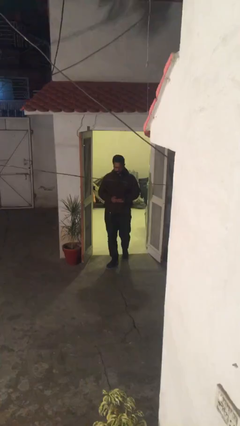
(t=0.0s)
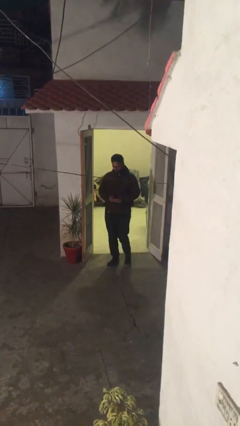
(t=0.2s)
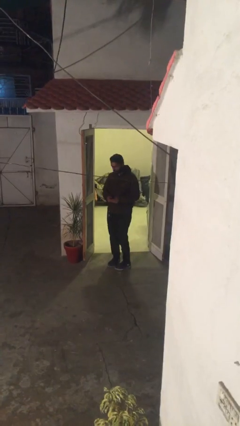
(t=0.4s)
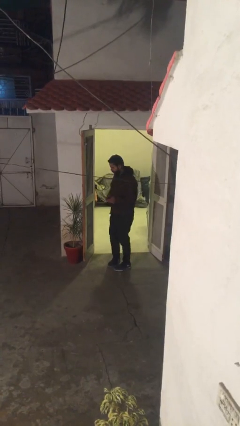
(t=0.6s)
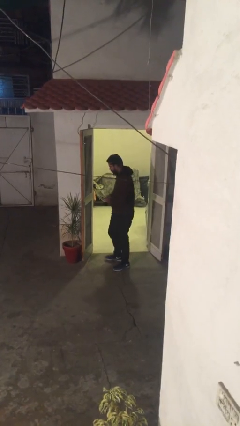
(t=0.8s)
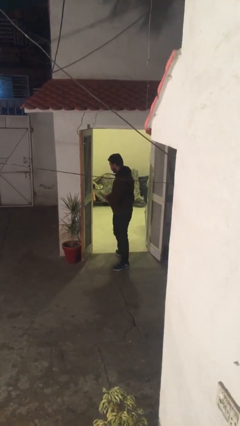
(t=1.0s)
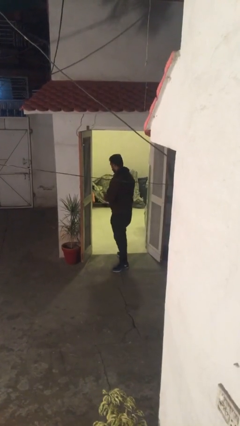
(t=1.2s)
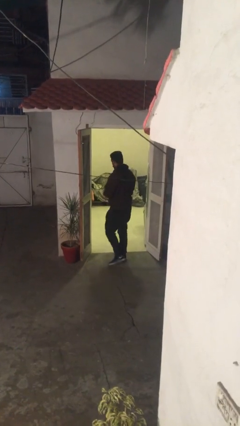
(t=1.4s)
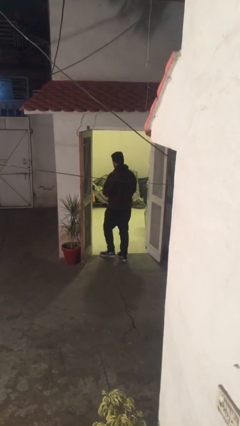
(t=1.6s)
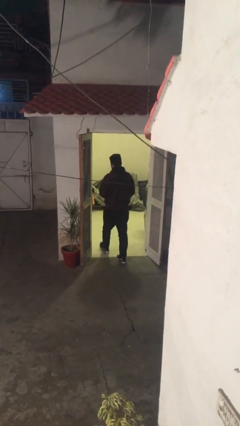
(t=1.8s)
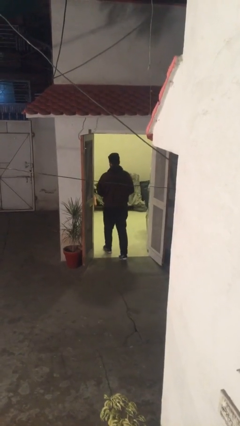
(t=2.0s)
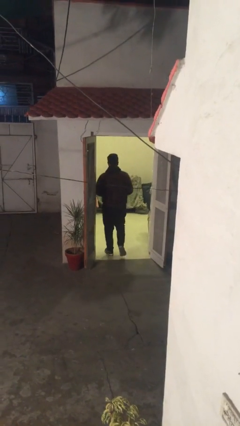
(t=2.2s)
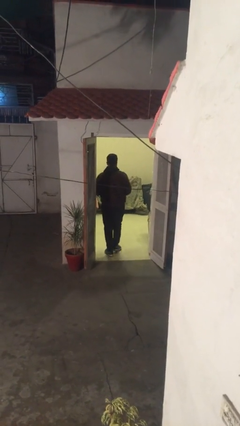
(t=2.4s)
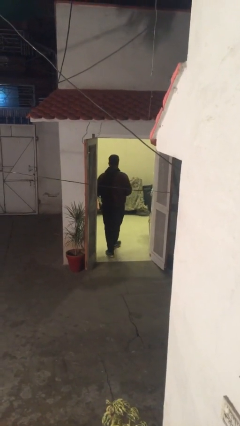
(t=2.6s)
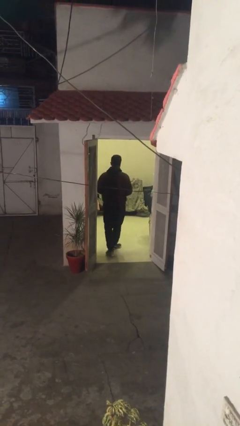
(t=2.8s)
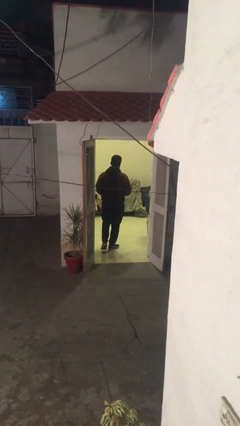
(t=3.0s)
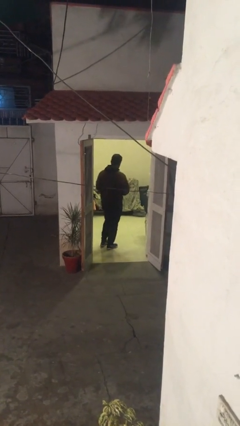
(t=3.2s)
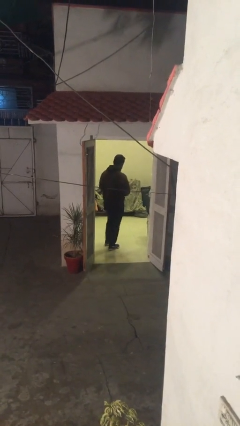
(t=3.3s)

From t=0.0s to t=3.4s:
person exits scene through structure

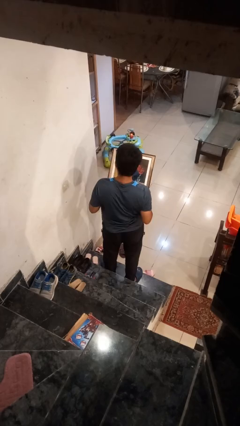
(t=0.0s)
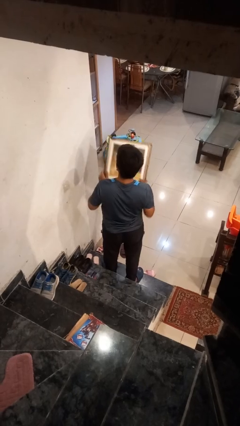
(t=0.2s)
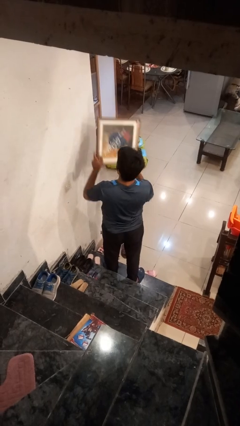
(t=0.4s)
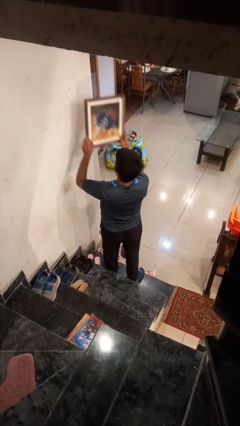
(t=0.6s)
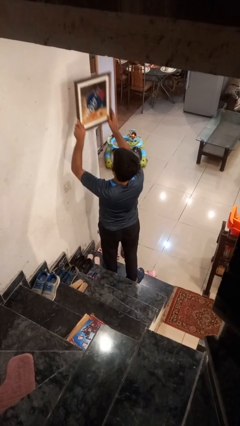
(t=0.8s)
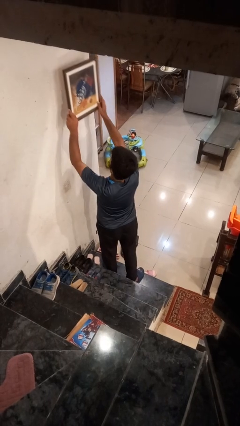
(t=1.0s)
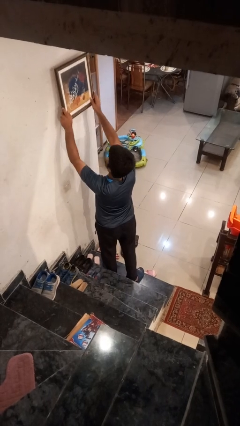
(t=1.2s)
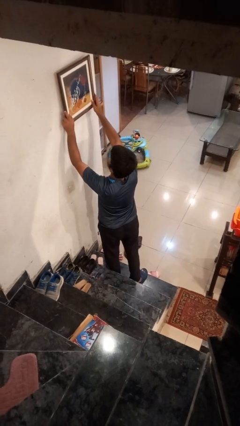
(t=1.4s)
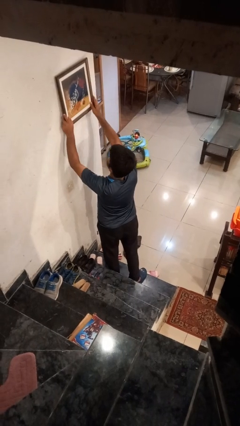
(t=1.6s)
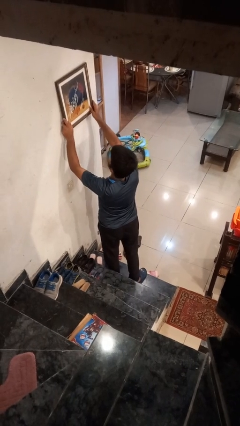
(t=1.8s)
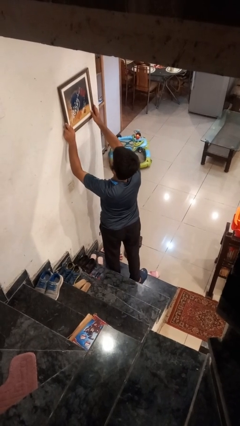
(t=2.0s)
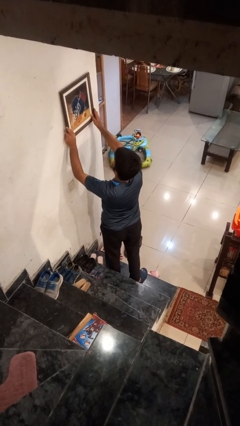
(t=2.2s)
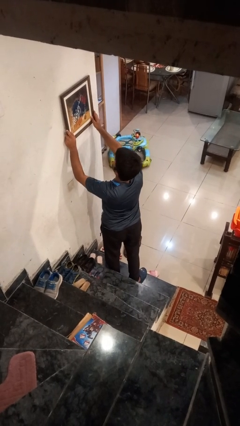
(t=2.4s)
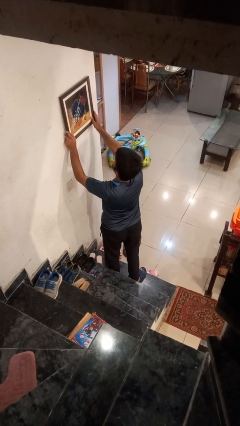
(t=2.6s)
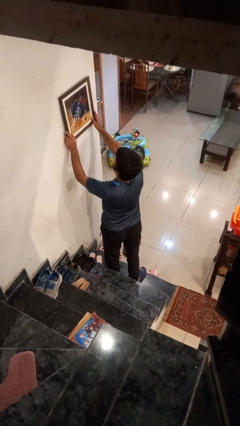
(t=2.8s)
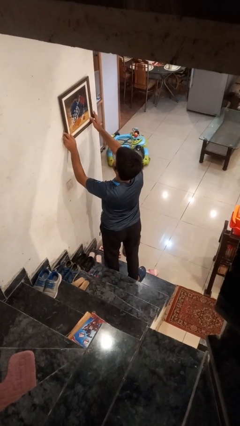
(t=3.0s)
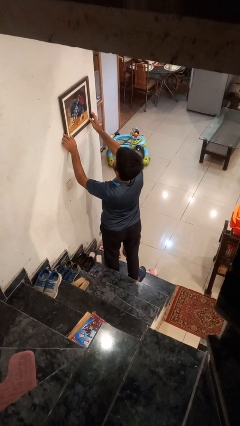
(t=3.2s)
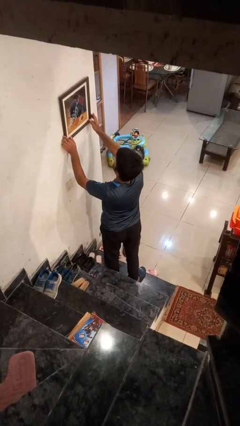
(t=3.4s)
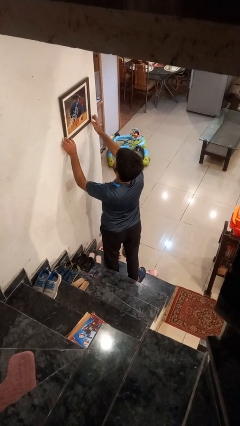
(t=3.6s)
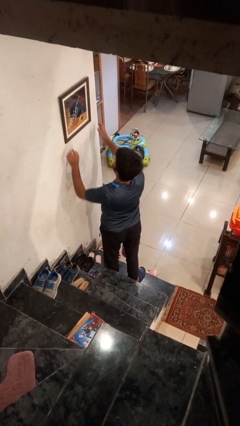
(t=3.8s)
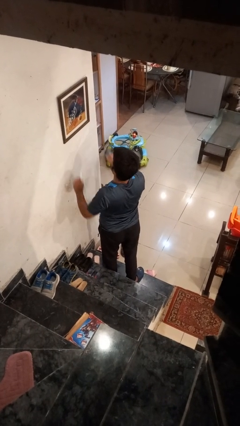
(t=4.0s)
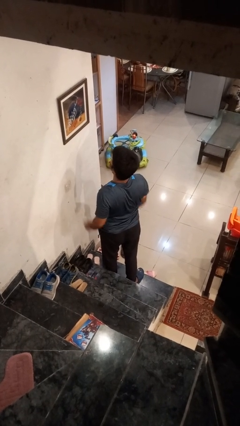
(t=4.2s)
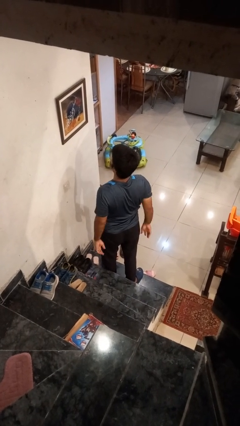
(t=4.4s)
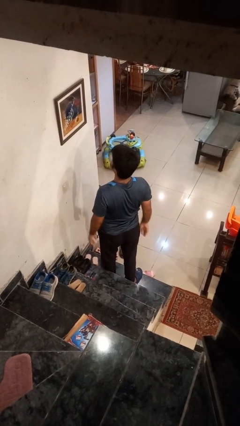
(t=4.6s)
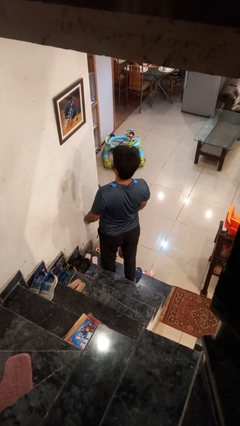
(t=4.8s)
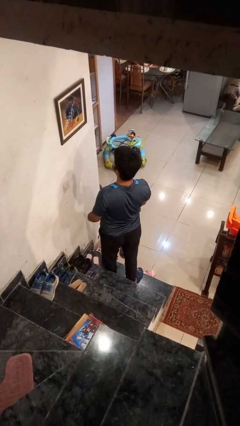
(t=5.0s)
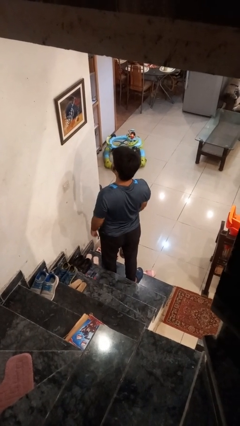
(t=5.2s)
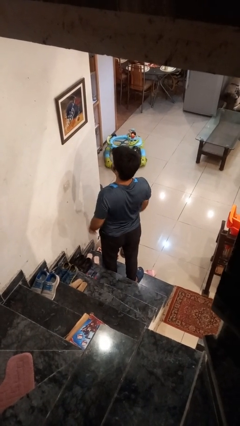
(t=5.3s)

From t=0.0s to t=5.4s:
person puts up picture frame

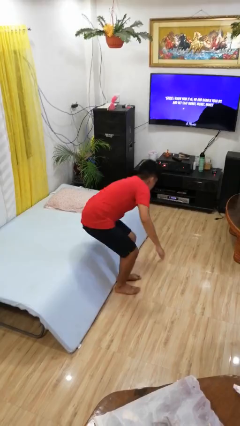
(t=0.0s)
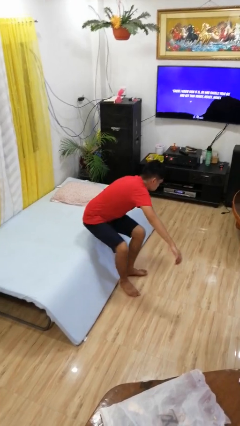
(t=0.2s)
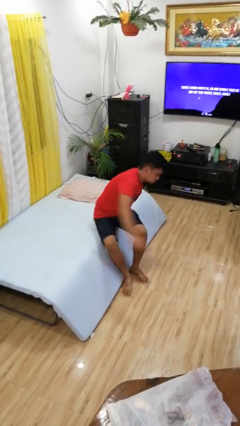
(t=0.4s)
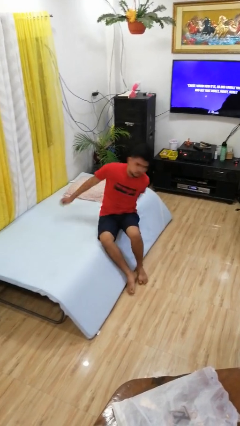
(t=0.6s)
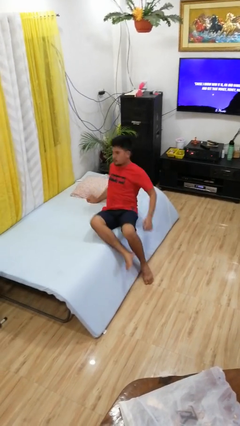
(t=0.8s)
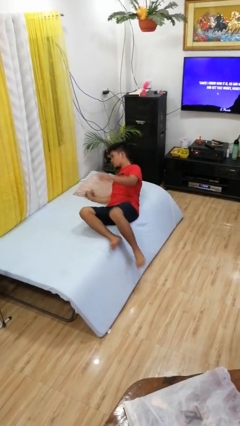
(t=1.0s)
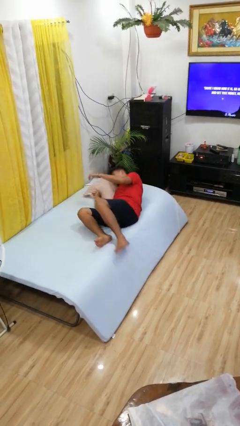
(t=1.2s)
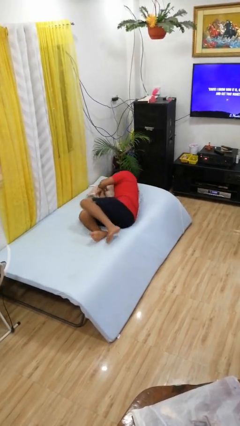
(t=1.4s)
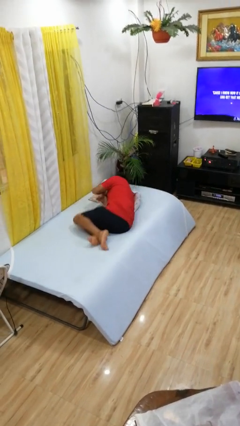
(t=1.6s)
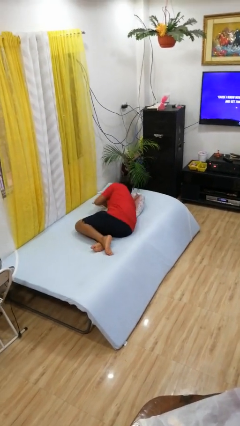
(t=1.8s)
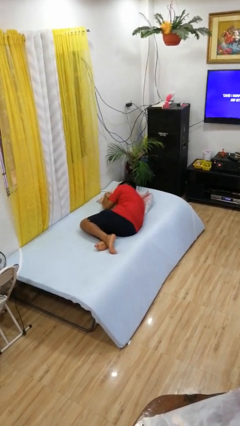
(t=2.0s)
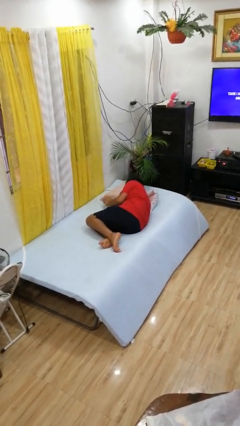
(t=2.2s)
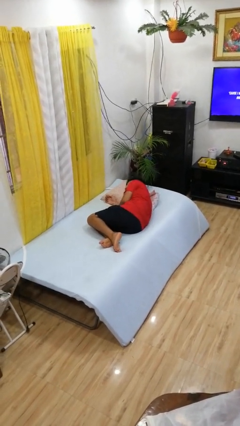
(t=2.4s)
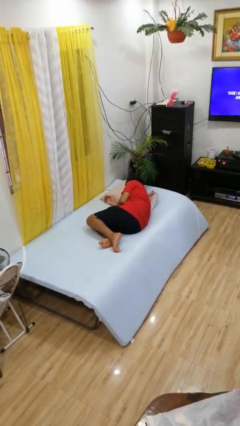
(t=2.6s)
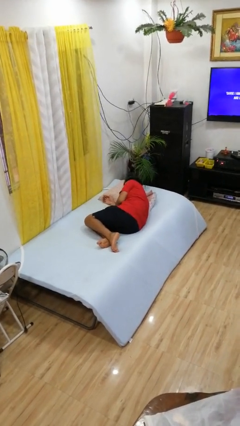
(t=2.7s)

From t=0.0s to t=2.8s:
person lies down on bed

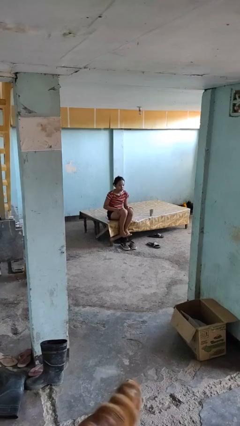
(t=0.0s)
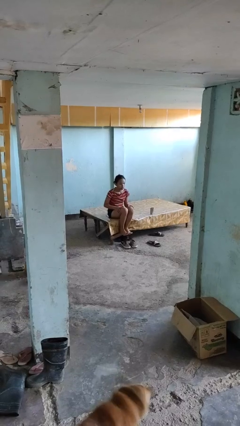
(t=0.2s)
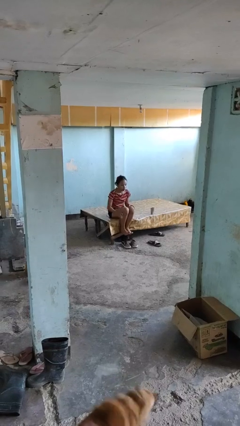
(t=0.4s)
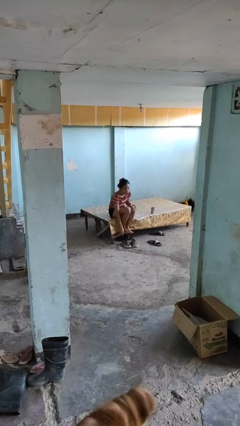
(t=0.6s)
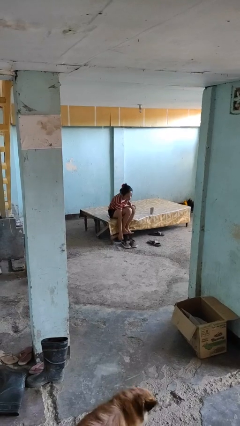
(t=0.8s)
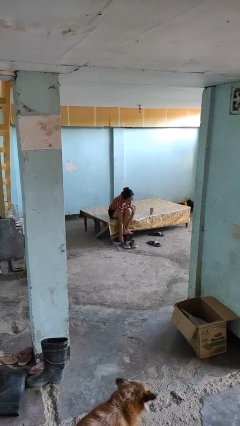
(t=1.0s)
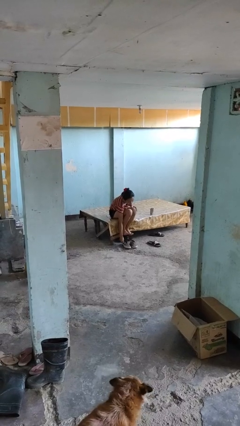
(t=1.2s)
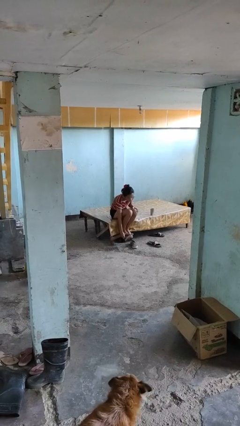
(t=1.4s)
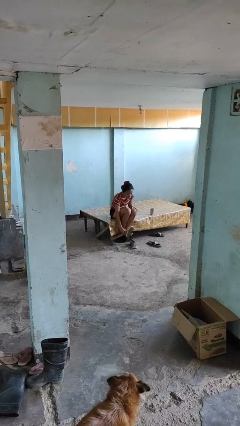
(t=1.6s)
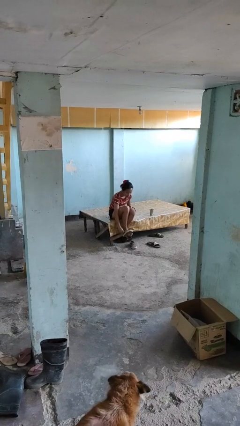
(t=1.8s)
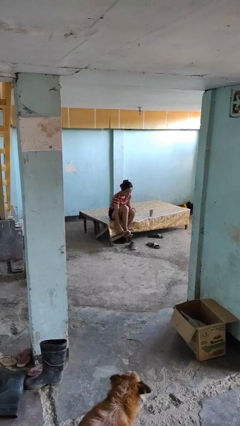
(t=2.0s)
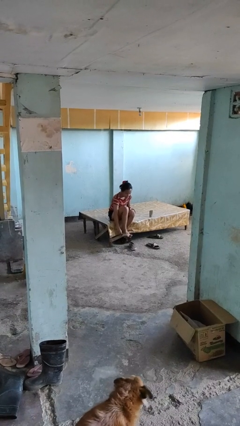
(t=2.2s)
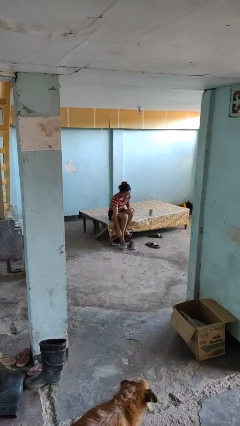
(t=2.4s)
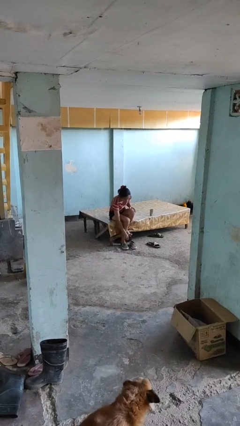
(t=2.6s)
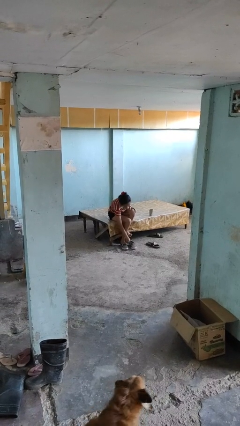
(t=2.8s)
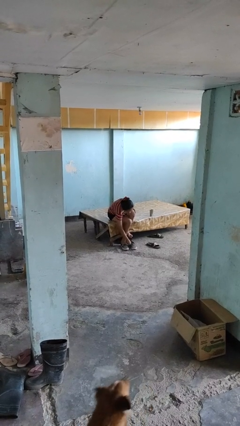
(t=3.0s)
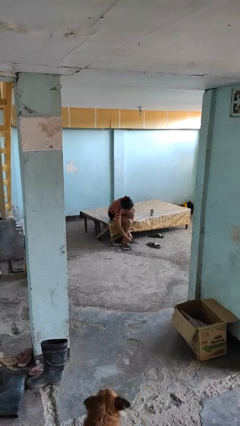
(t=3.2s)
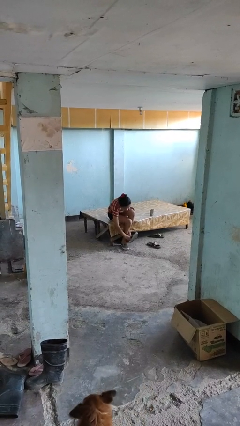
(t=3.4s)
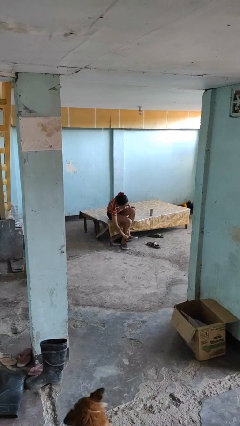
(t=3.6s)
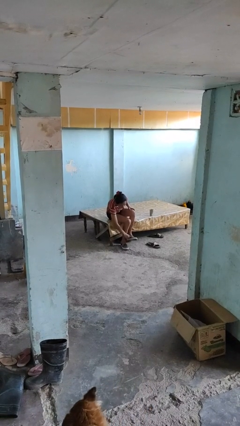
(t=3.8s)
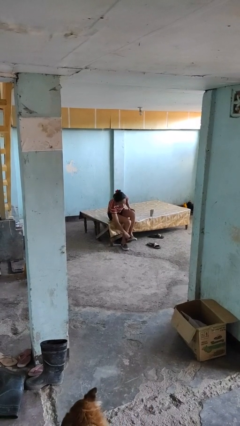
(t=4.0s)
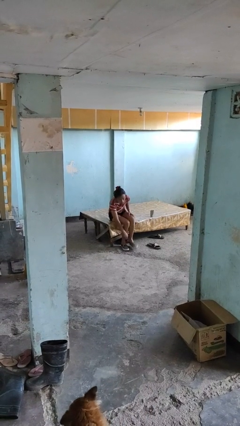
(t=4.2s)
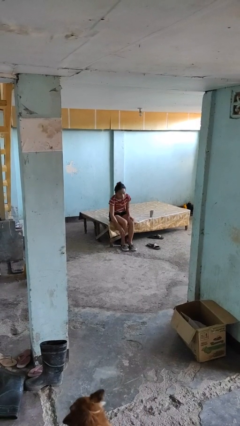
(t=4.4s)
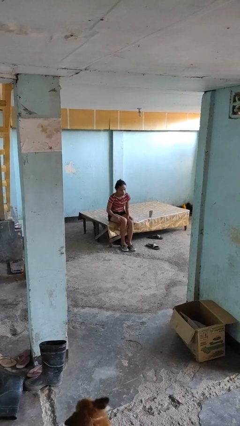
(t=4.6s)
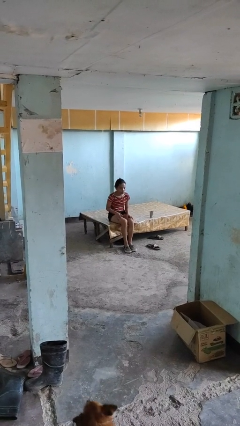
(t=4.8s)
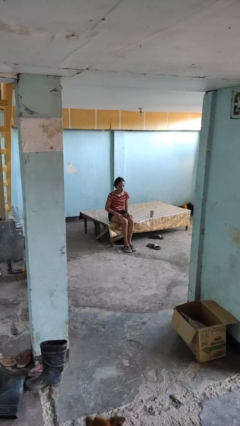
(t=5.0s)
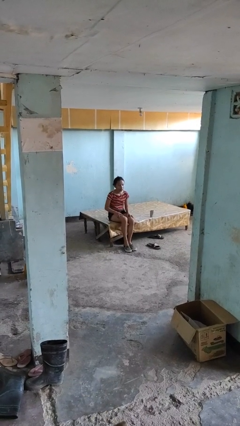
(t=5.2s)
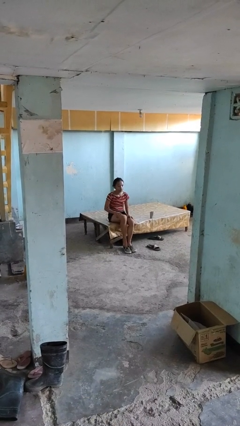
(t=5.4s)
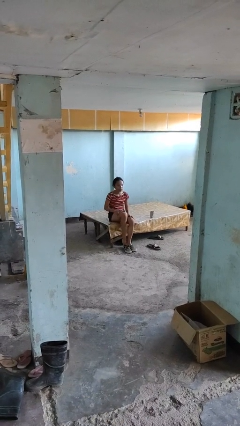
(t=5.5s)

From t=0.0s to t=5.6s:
person puts on shoes

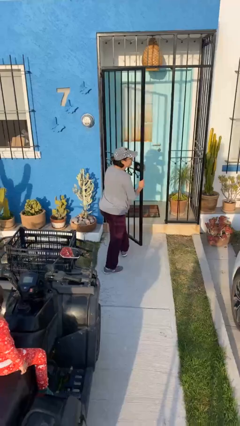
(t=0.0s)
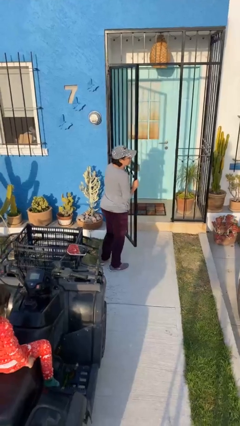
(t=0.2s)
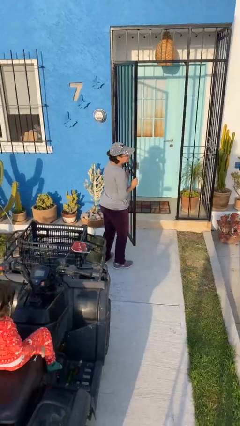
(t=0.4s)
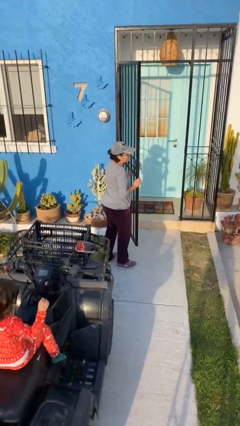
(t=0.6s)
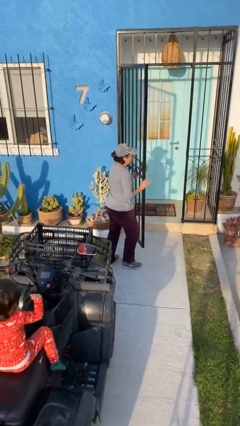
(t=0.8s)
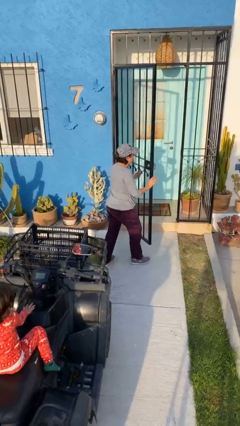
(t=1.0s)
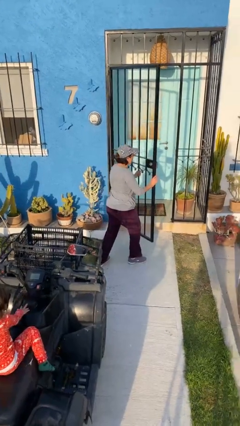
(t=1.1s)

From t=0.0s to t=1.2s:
person opens facility door
